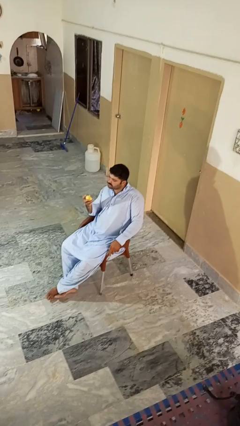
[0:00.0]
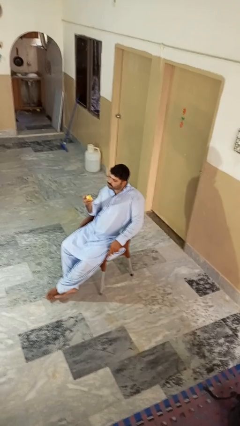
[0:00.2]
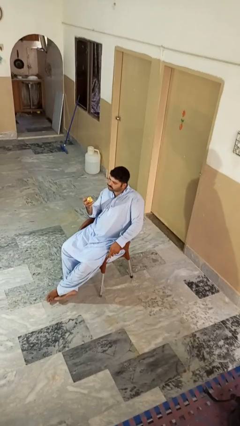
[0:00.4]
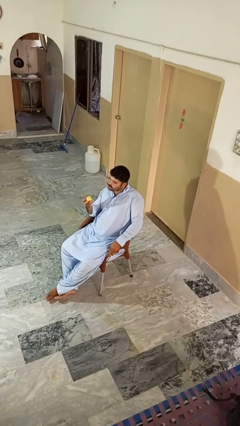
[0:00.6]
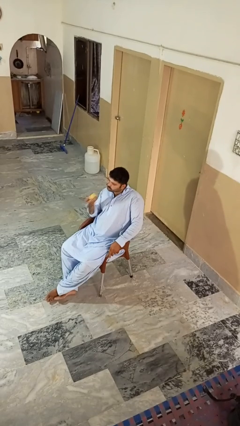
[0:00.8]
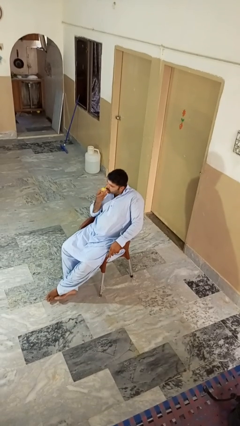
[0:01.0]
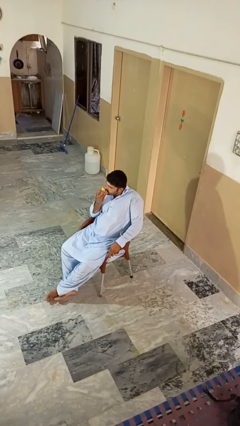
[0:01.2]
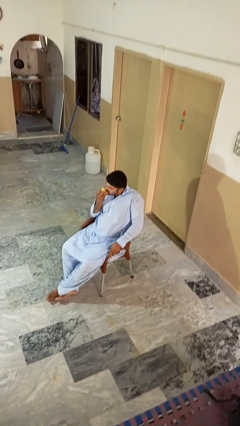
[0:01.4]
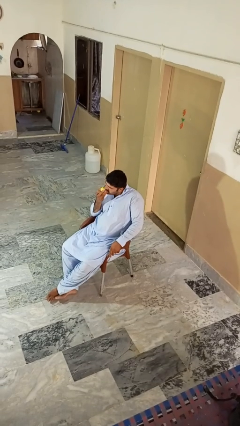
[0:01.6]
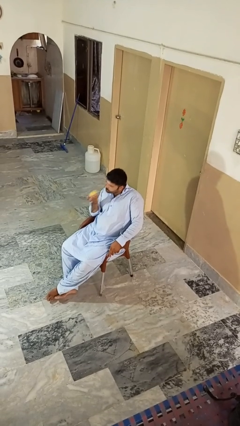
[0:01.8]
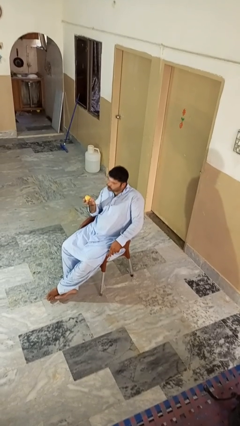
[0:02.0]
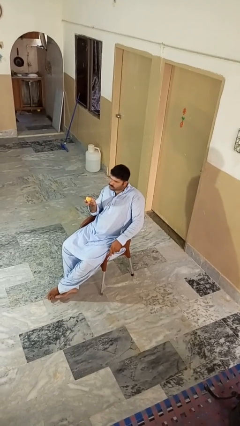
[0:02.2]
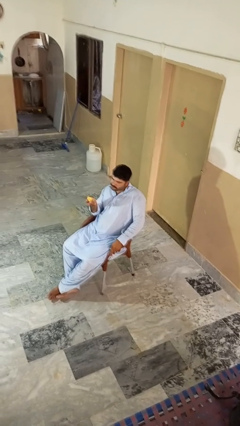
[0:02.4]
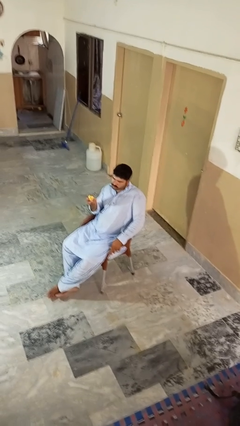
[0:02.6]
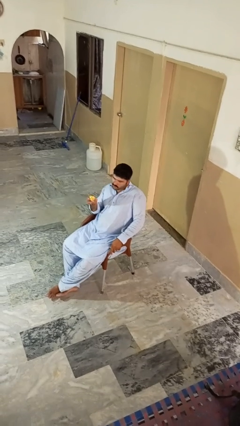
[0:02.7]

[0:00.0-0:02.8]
person eats apple

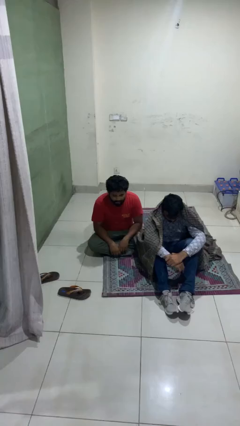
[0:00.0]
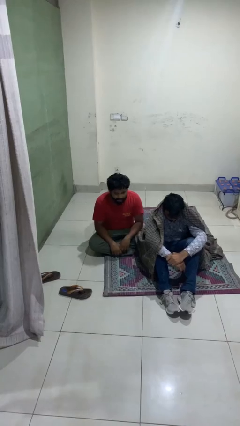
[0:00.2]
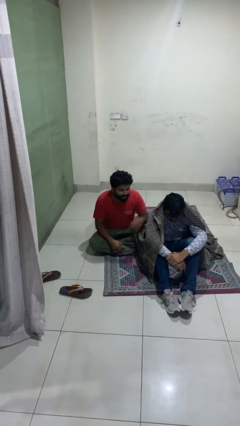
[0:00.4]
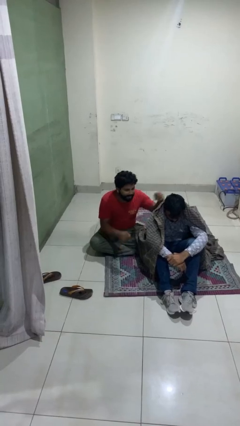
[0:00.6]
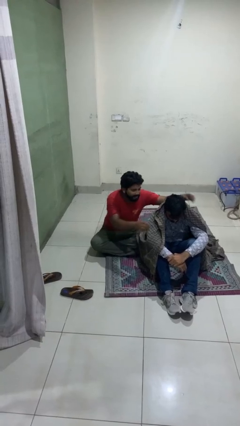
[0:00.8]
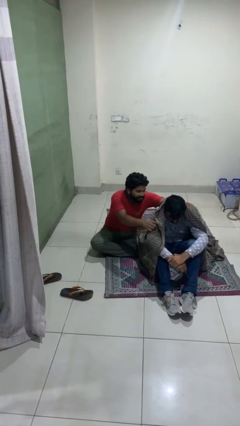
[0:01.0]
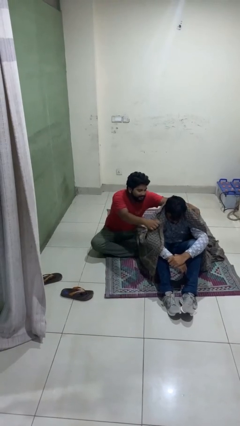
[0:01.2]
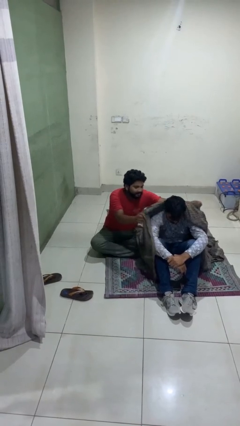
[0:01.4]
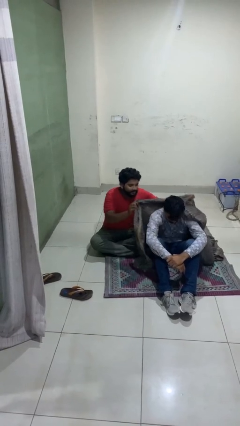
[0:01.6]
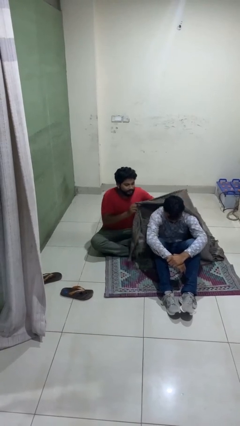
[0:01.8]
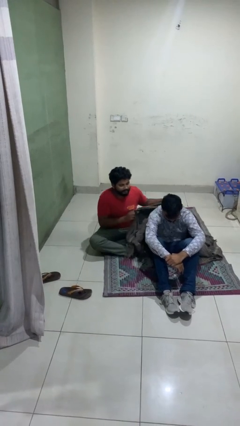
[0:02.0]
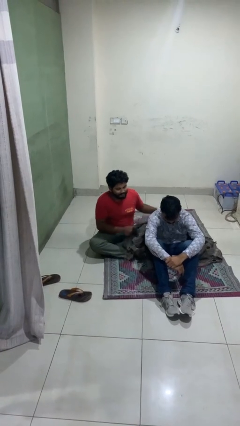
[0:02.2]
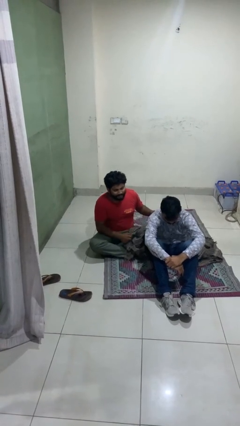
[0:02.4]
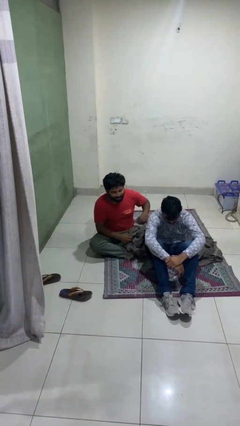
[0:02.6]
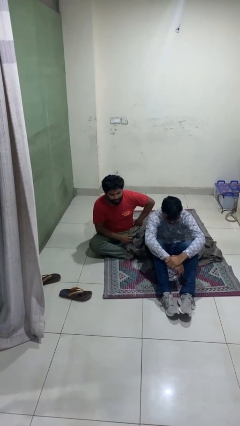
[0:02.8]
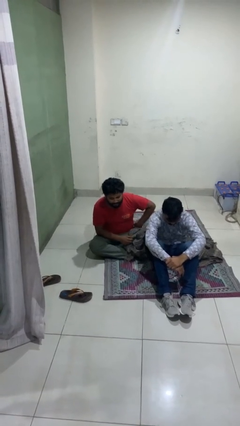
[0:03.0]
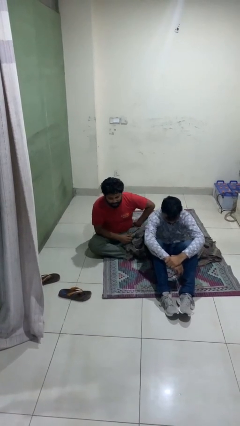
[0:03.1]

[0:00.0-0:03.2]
person uncovers friend with blanket

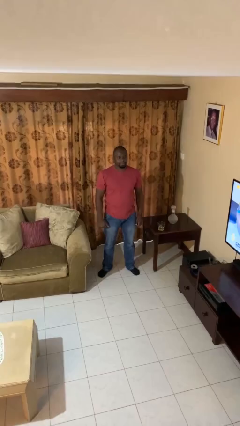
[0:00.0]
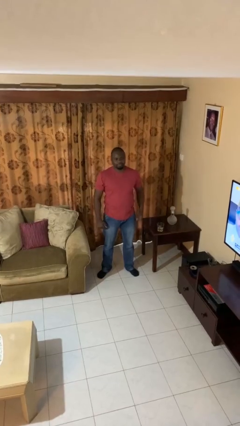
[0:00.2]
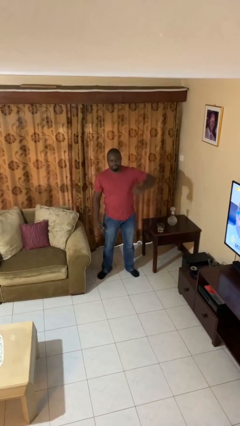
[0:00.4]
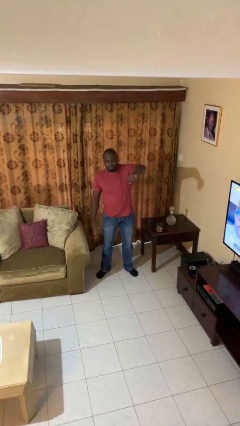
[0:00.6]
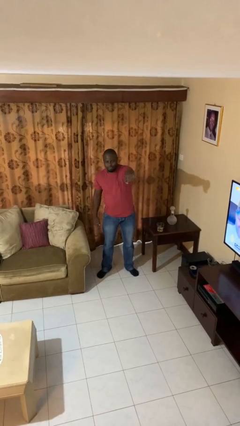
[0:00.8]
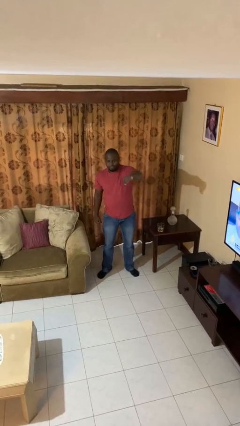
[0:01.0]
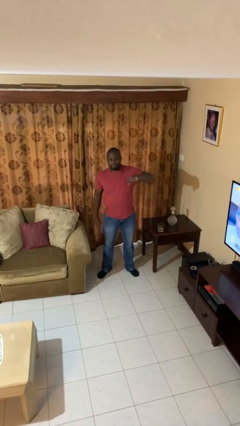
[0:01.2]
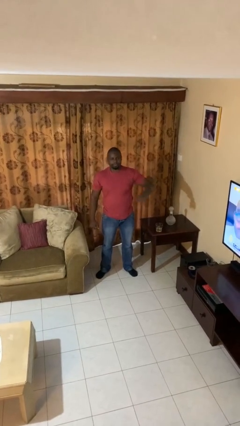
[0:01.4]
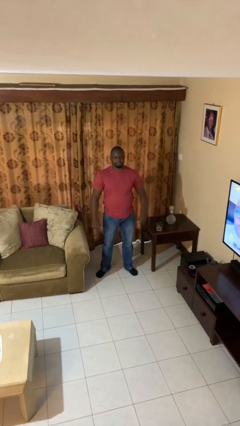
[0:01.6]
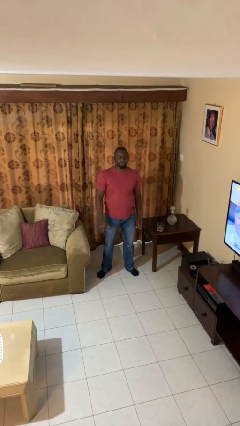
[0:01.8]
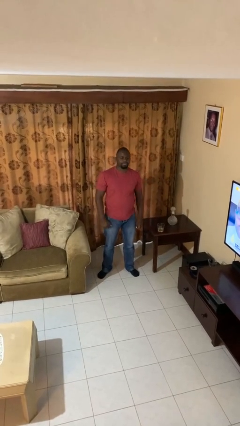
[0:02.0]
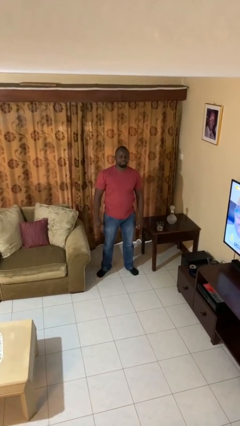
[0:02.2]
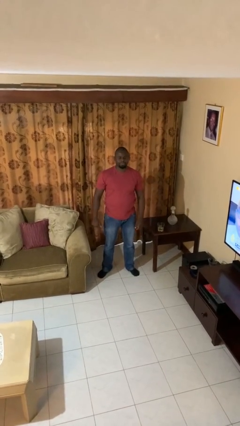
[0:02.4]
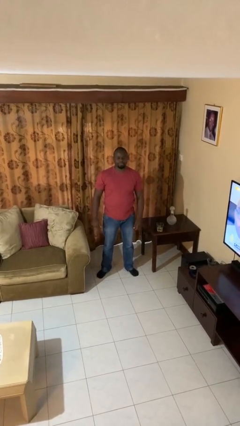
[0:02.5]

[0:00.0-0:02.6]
person punches

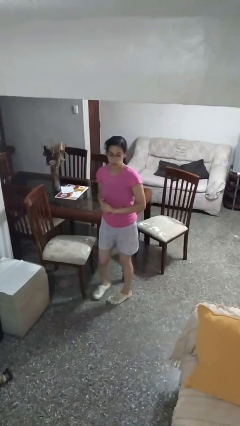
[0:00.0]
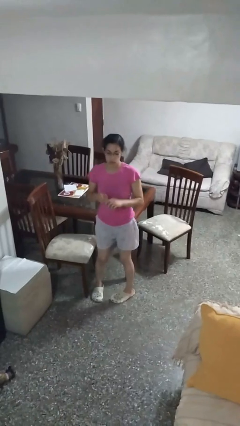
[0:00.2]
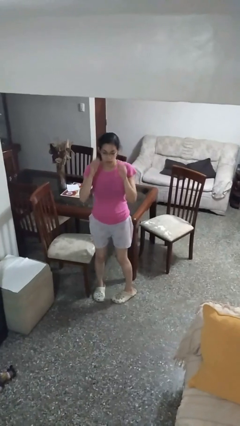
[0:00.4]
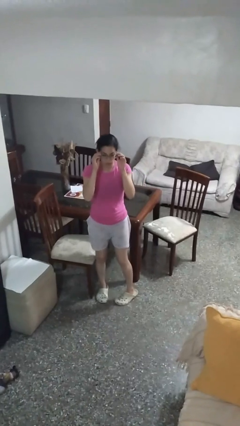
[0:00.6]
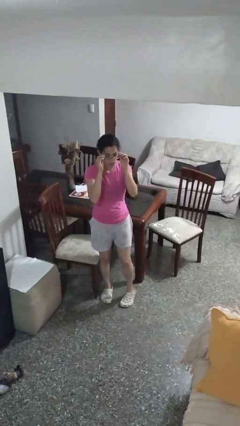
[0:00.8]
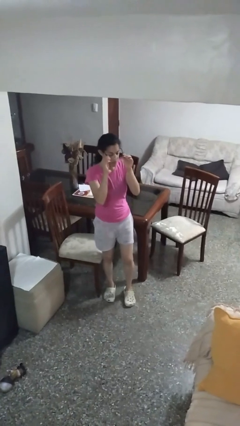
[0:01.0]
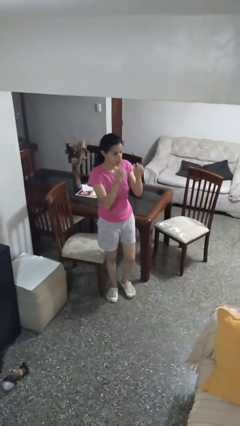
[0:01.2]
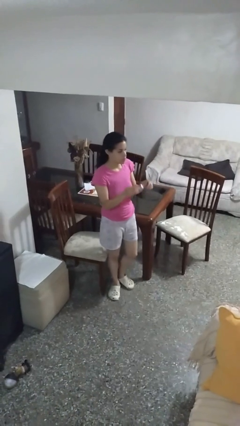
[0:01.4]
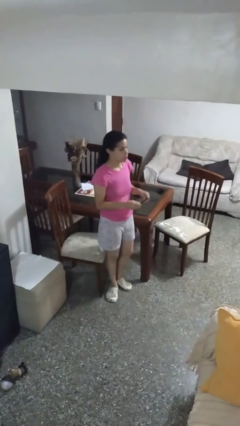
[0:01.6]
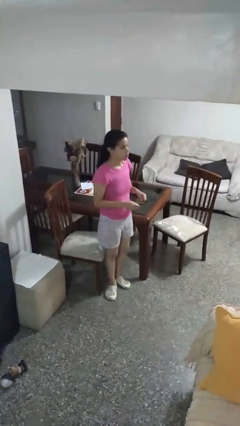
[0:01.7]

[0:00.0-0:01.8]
person takes off glasses

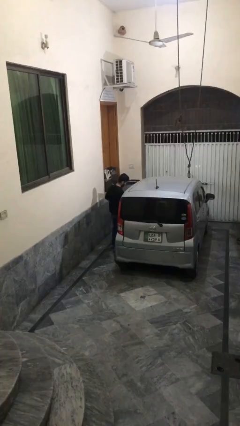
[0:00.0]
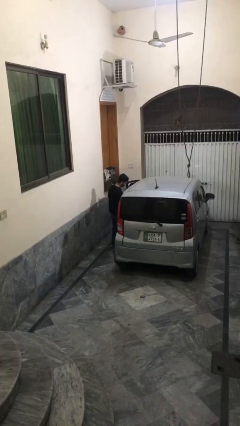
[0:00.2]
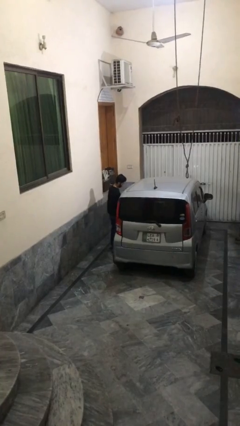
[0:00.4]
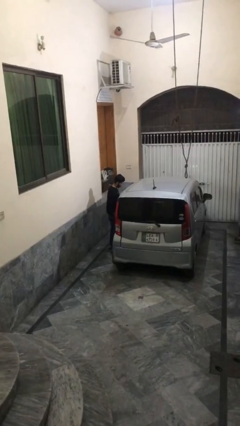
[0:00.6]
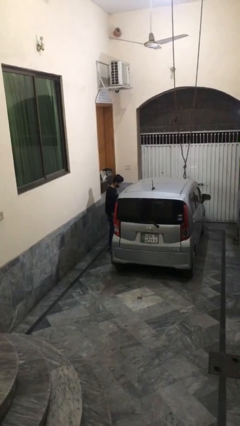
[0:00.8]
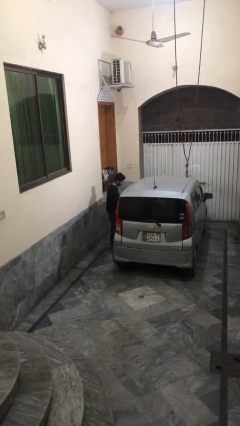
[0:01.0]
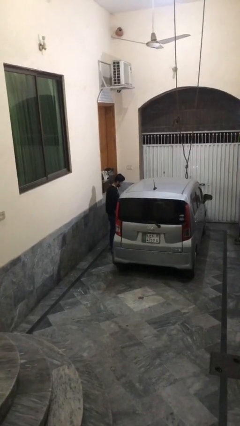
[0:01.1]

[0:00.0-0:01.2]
person closes car door

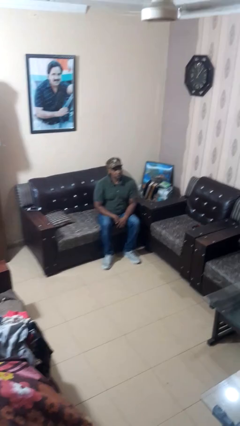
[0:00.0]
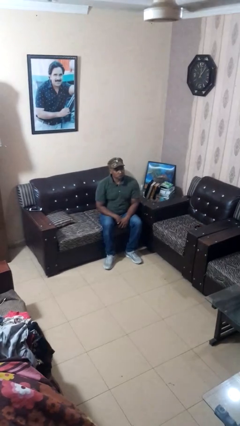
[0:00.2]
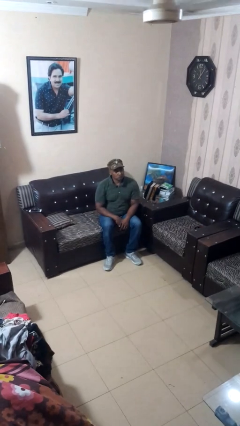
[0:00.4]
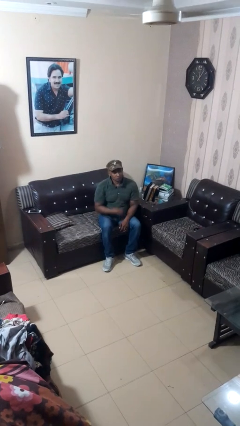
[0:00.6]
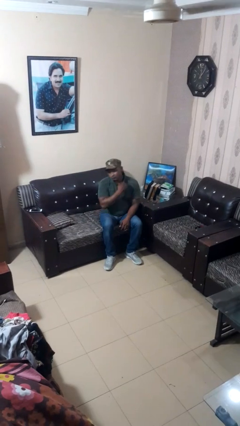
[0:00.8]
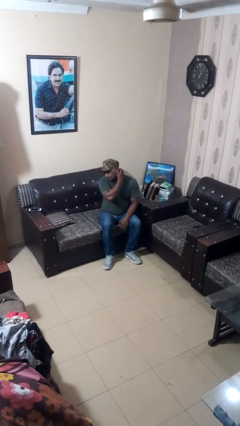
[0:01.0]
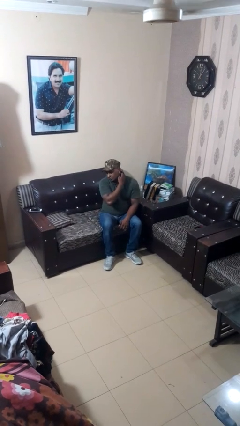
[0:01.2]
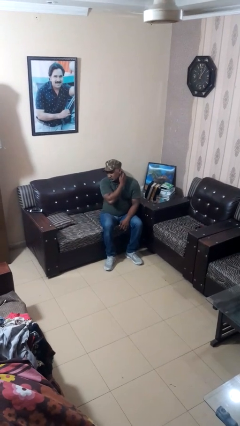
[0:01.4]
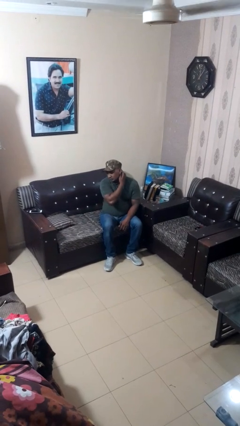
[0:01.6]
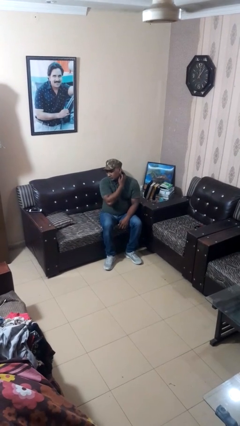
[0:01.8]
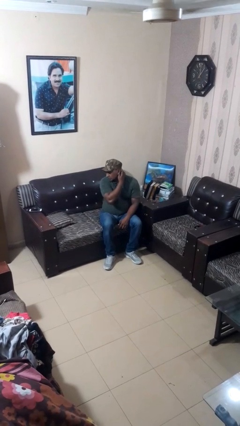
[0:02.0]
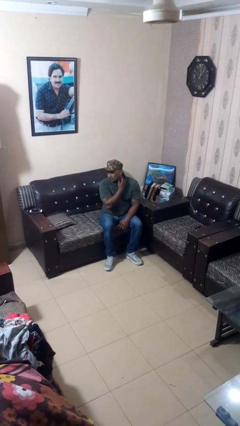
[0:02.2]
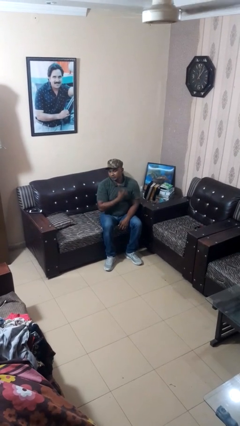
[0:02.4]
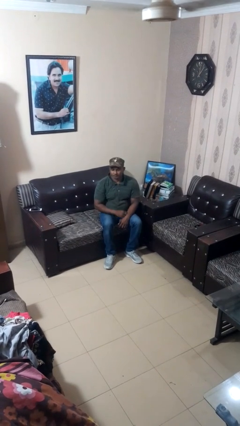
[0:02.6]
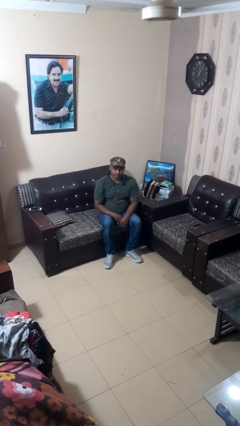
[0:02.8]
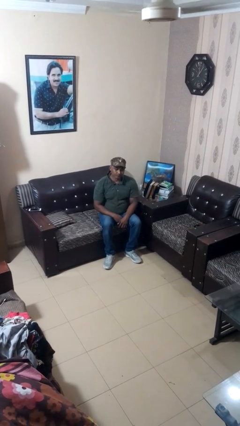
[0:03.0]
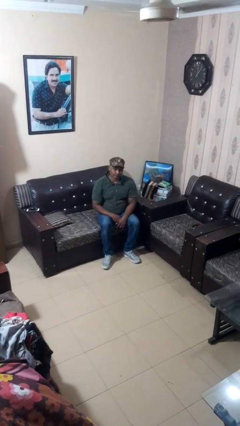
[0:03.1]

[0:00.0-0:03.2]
person rubs neck

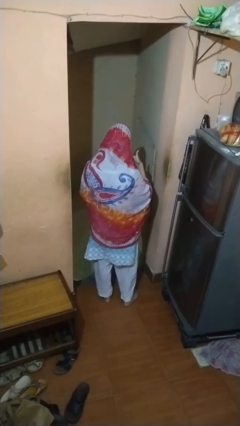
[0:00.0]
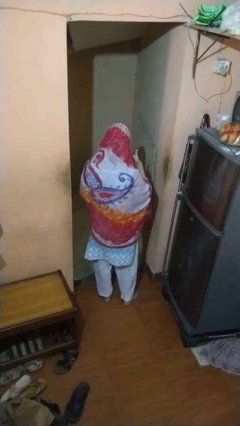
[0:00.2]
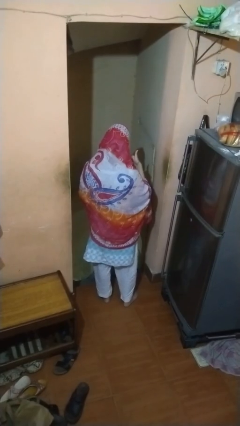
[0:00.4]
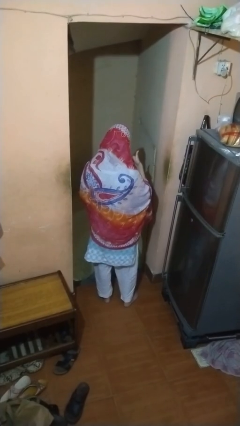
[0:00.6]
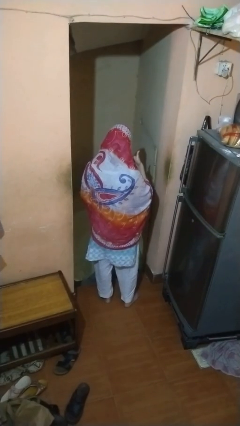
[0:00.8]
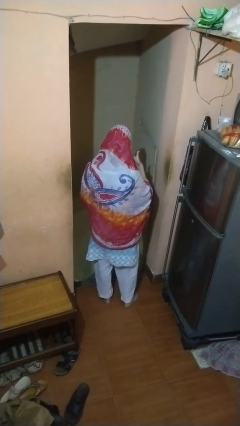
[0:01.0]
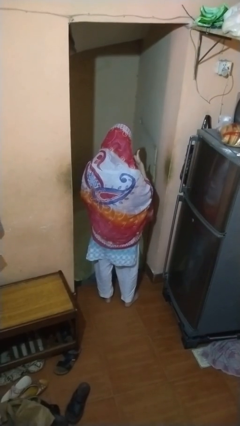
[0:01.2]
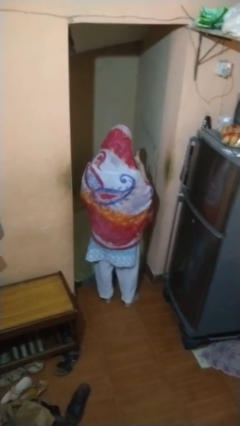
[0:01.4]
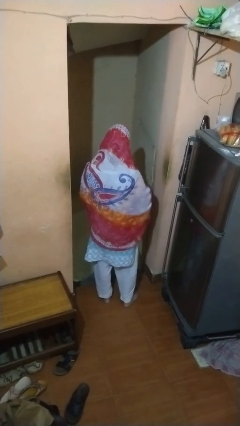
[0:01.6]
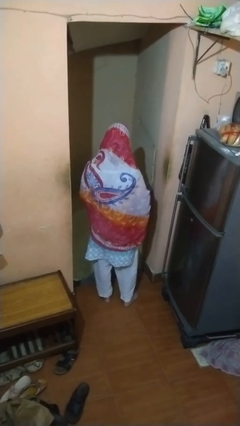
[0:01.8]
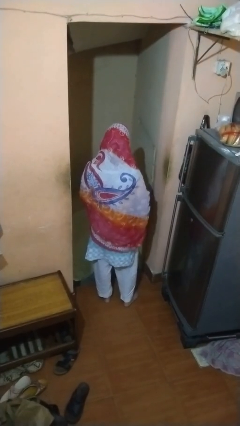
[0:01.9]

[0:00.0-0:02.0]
person gestures call me

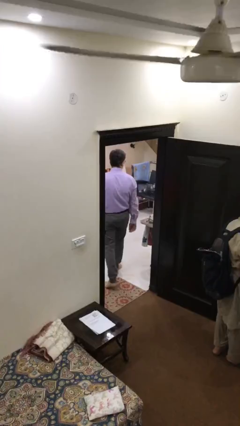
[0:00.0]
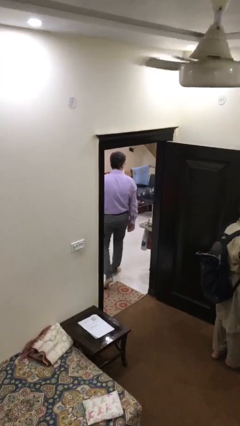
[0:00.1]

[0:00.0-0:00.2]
person steals object from person
